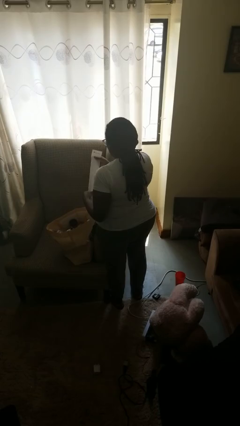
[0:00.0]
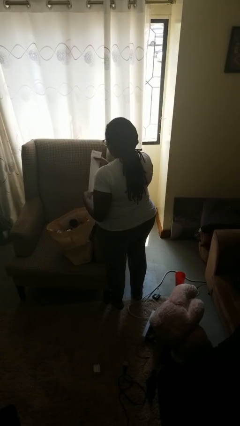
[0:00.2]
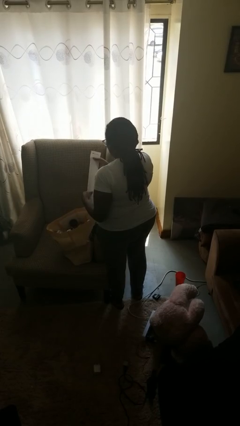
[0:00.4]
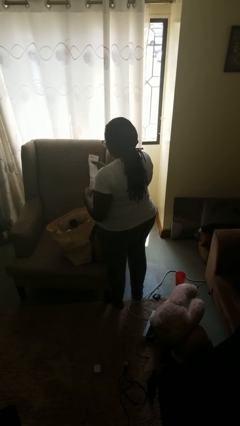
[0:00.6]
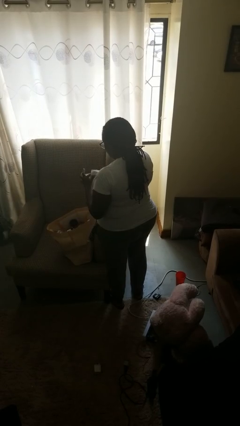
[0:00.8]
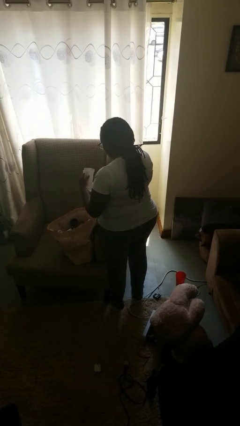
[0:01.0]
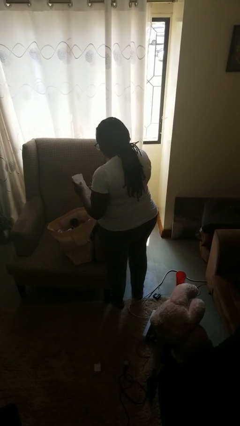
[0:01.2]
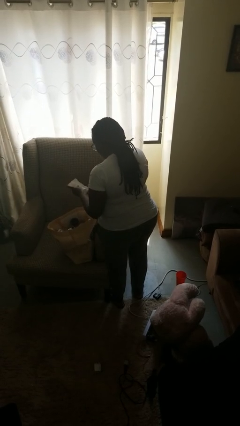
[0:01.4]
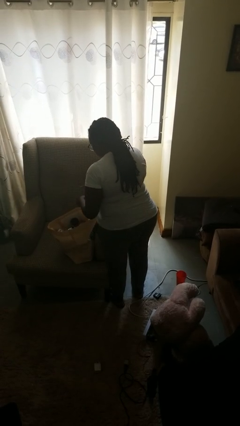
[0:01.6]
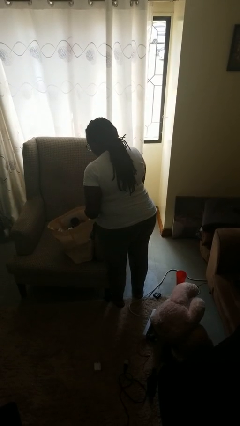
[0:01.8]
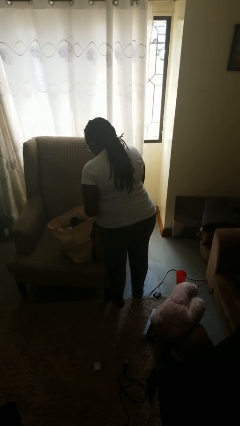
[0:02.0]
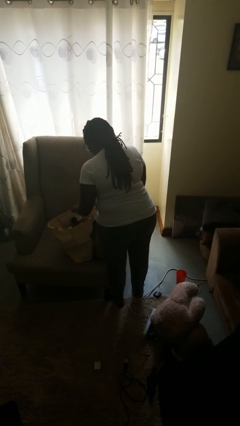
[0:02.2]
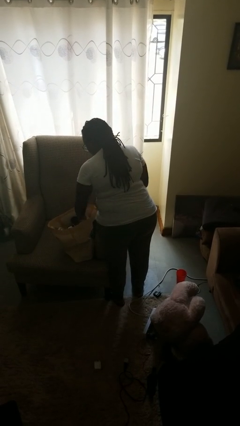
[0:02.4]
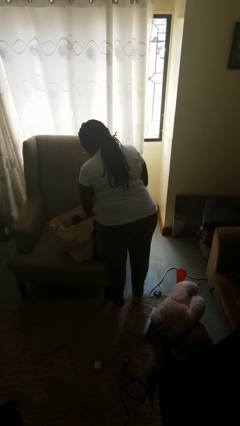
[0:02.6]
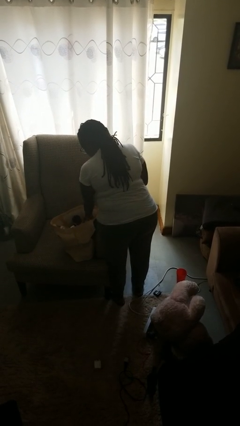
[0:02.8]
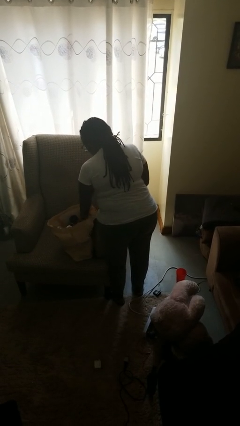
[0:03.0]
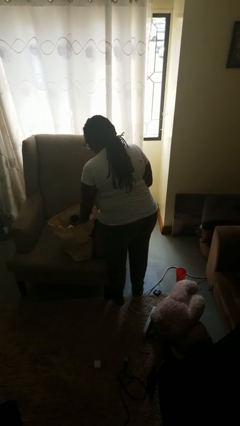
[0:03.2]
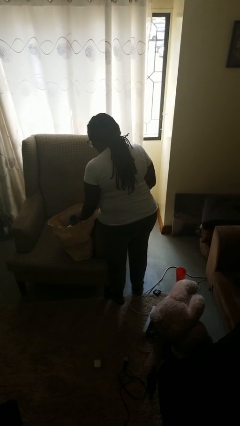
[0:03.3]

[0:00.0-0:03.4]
person puts object into bag

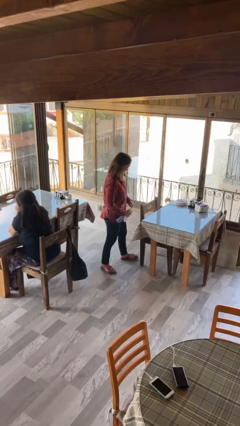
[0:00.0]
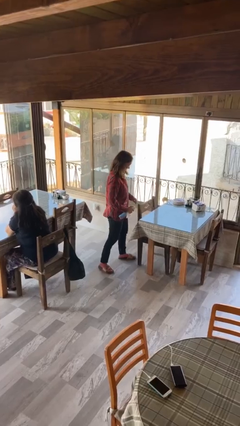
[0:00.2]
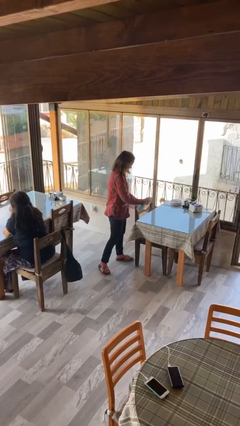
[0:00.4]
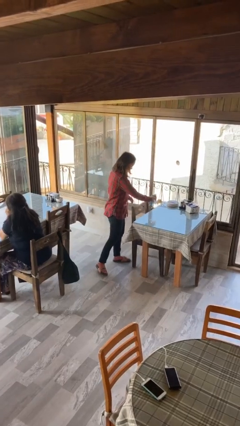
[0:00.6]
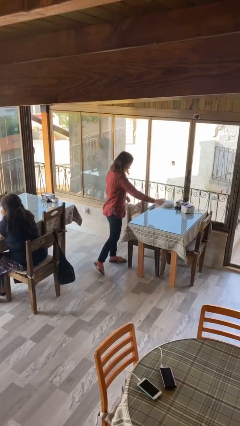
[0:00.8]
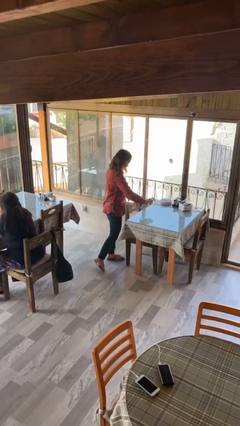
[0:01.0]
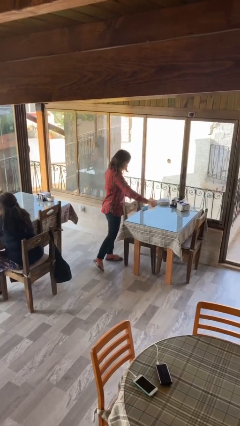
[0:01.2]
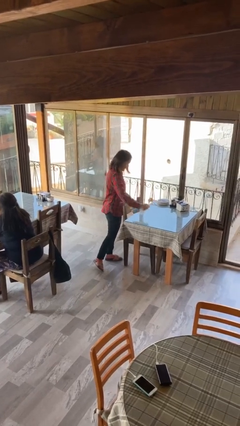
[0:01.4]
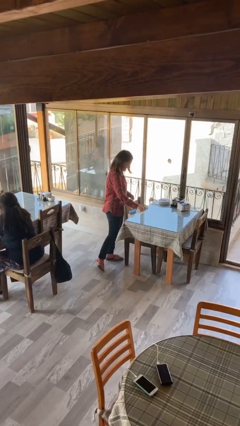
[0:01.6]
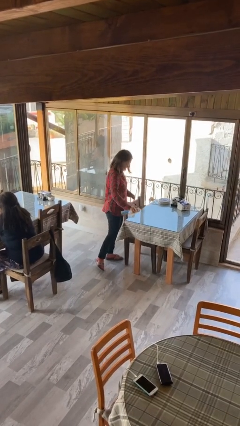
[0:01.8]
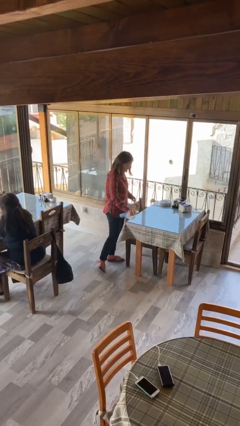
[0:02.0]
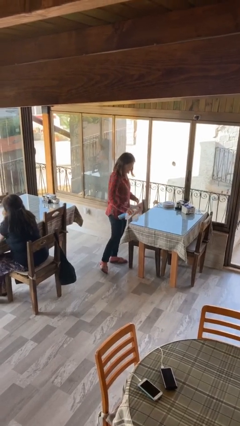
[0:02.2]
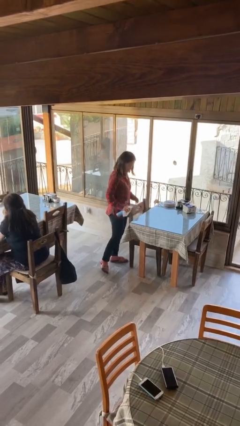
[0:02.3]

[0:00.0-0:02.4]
person sprays from bottle

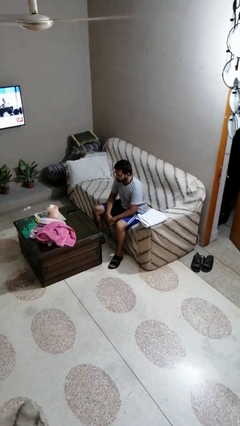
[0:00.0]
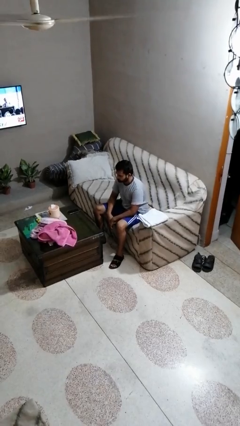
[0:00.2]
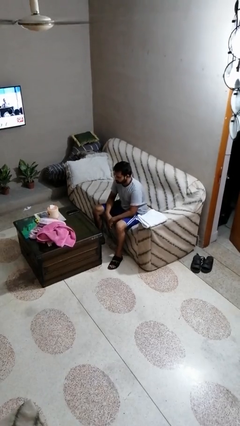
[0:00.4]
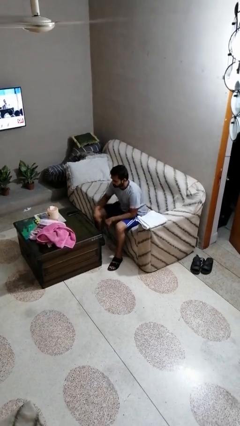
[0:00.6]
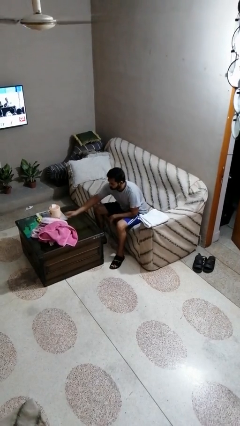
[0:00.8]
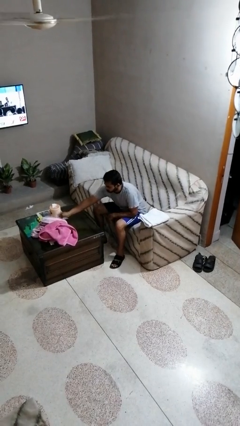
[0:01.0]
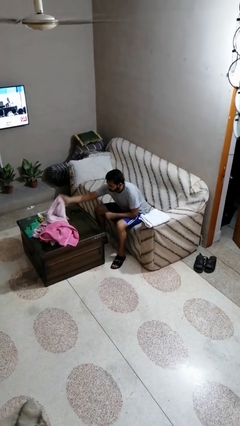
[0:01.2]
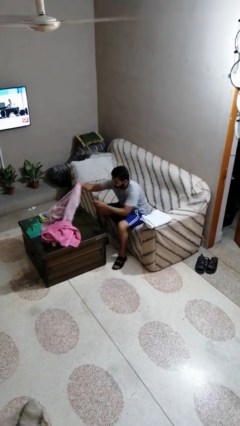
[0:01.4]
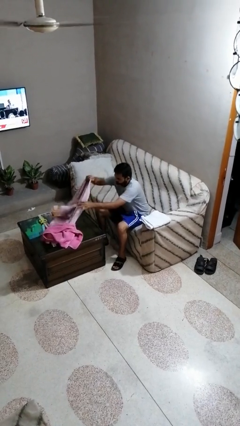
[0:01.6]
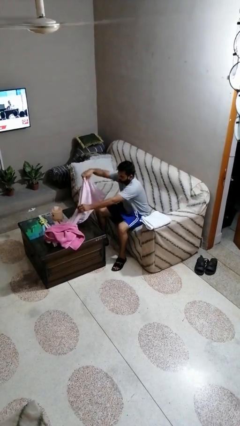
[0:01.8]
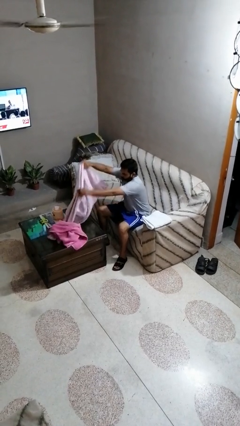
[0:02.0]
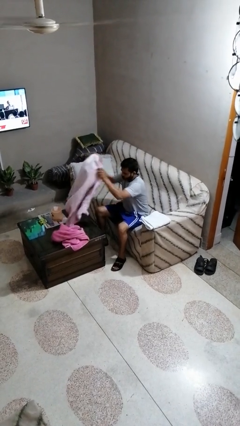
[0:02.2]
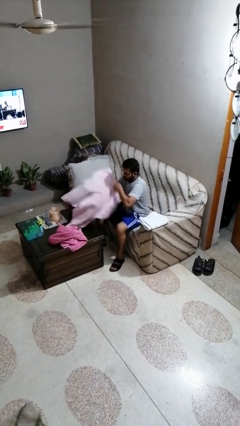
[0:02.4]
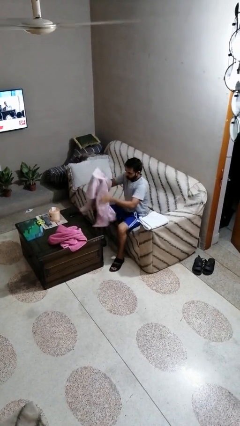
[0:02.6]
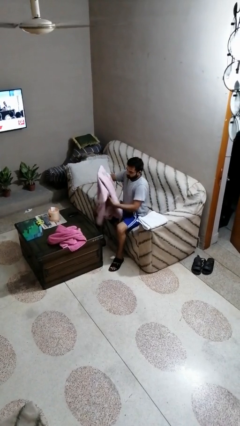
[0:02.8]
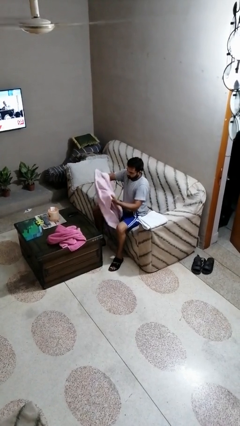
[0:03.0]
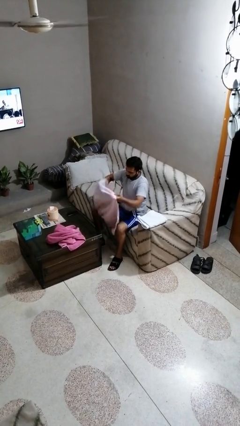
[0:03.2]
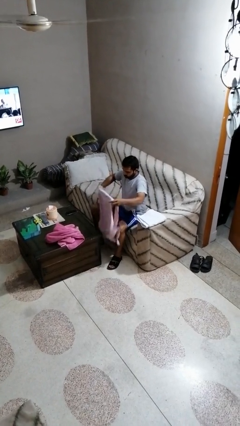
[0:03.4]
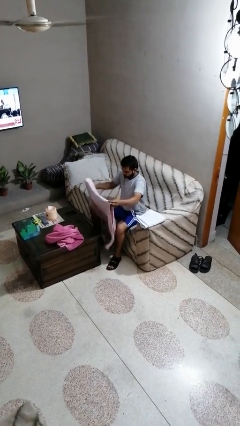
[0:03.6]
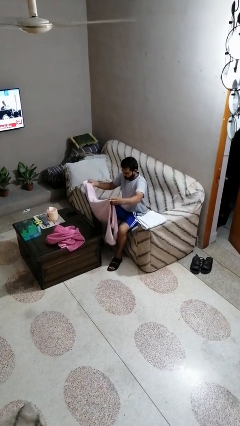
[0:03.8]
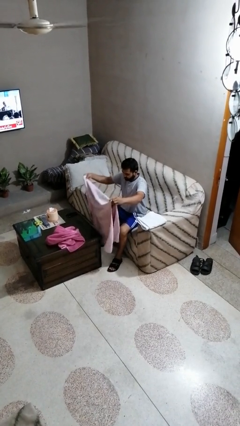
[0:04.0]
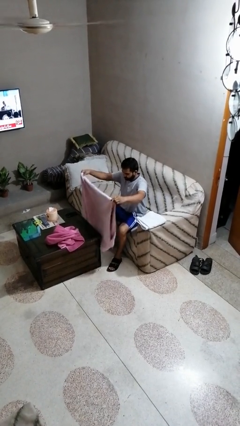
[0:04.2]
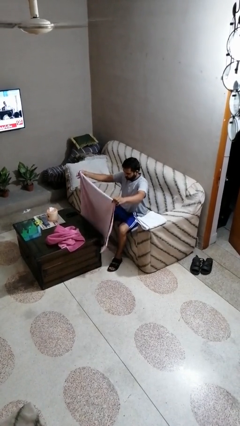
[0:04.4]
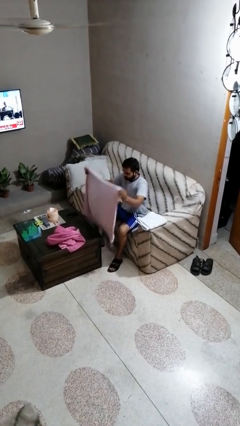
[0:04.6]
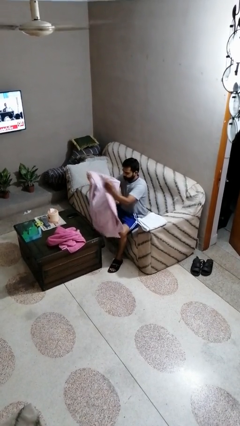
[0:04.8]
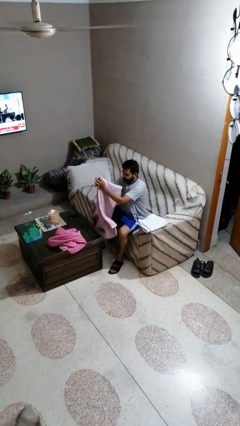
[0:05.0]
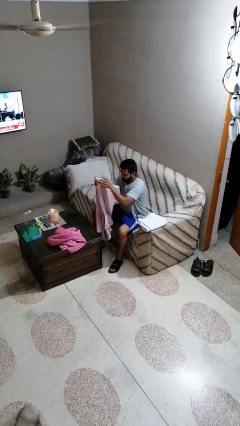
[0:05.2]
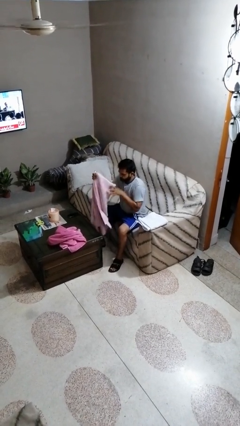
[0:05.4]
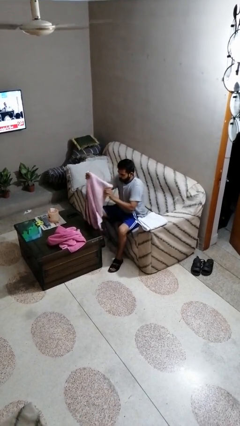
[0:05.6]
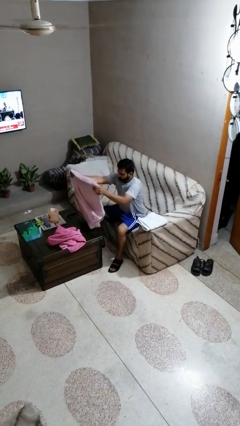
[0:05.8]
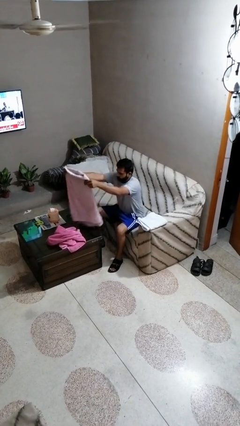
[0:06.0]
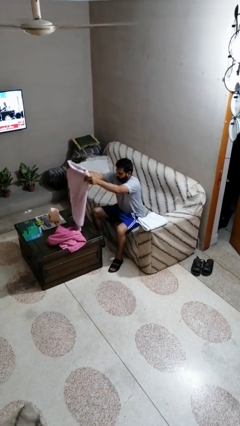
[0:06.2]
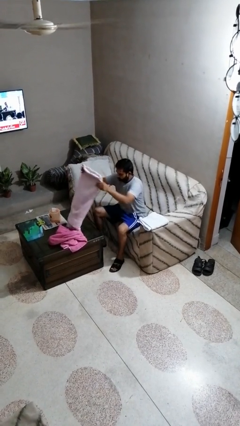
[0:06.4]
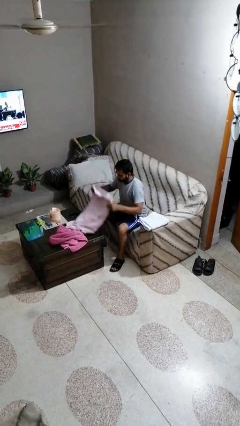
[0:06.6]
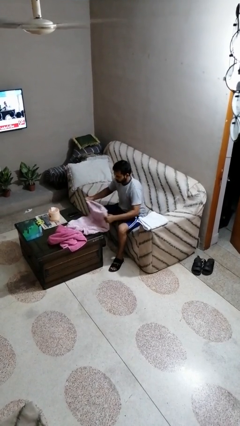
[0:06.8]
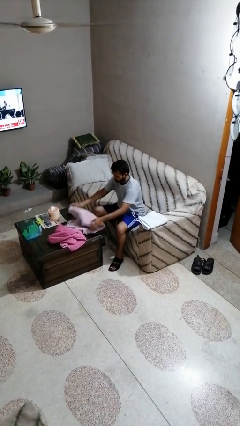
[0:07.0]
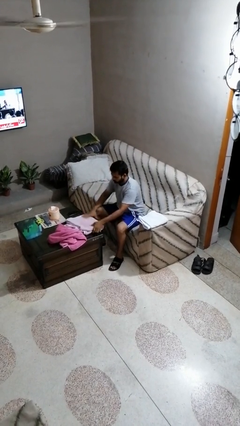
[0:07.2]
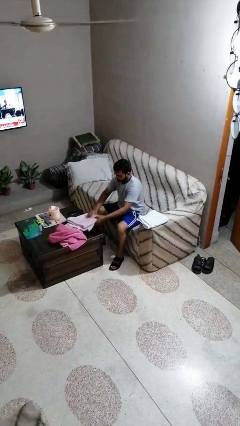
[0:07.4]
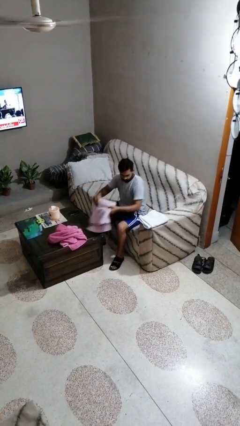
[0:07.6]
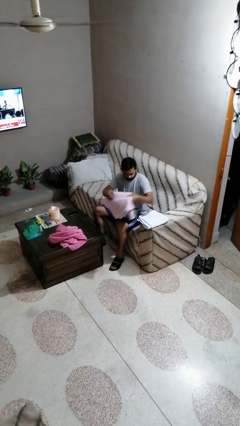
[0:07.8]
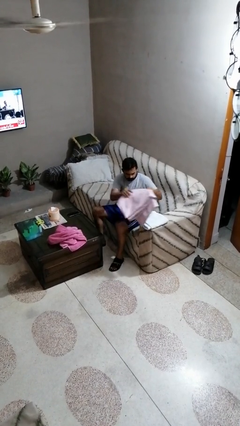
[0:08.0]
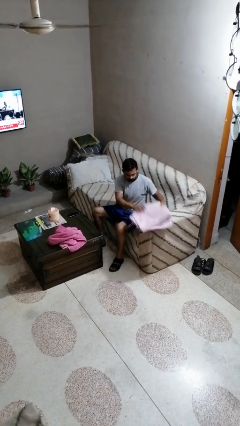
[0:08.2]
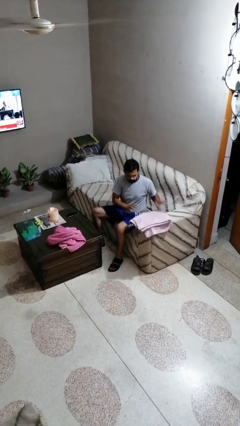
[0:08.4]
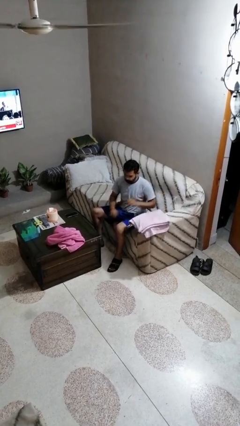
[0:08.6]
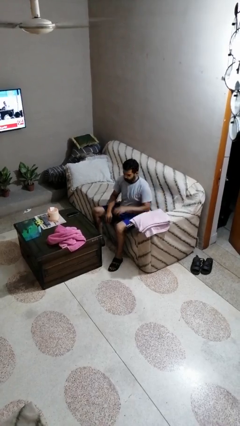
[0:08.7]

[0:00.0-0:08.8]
person folds towel

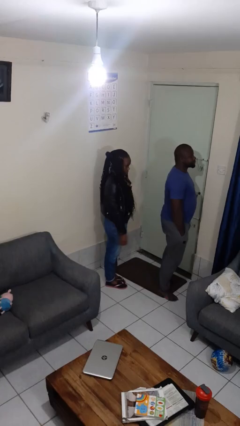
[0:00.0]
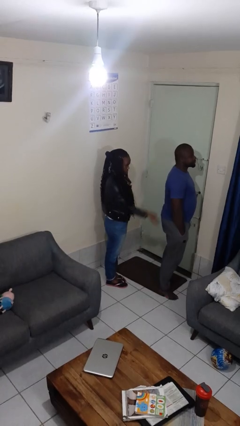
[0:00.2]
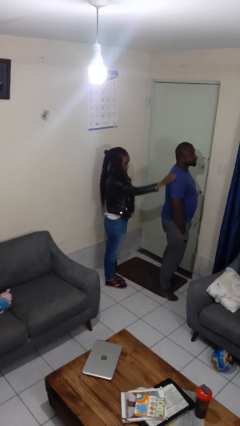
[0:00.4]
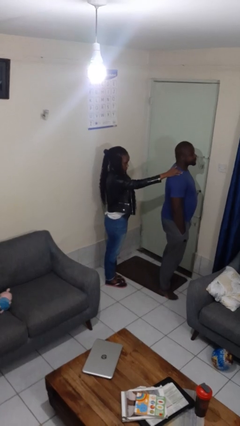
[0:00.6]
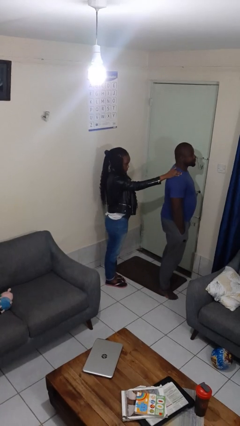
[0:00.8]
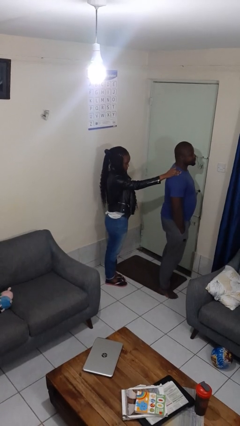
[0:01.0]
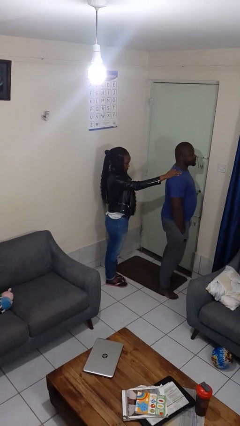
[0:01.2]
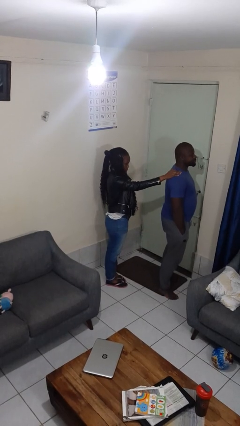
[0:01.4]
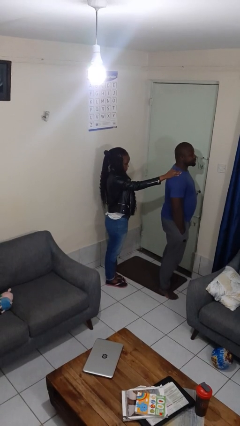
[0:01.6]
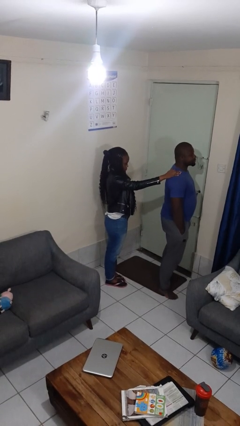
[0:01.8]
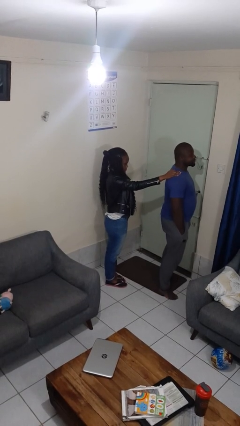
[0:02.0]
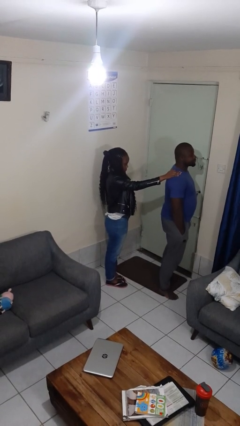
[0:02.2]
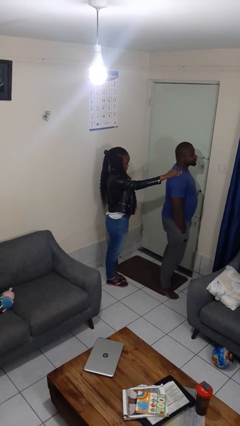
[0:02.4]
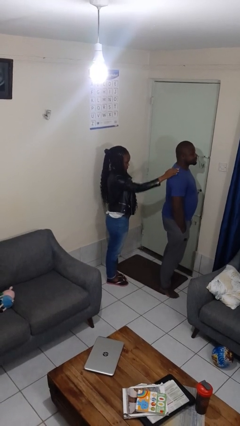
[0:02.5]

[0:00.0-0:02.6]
person touches back of person
